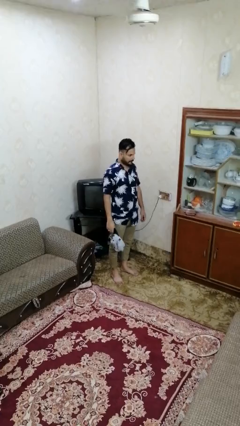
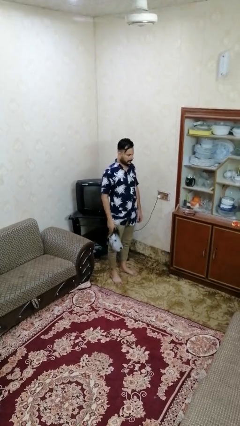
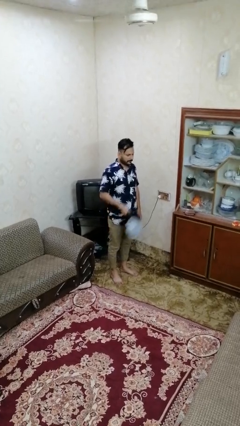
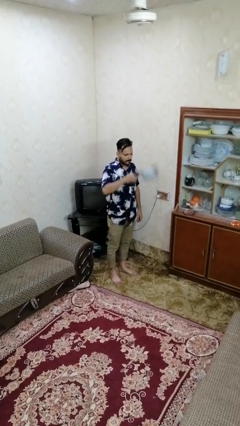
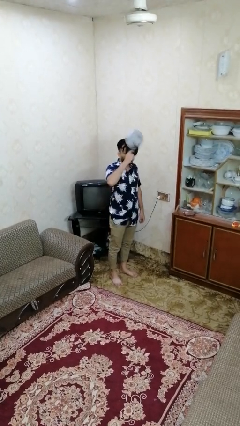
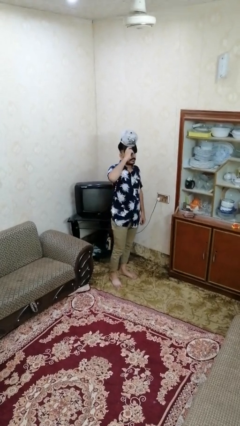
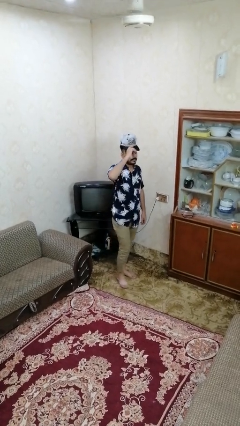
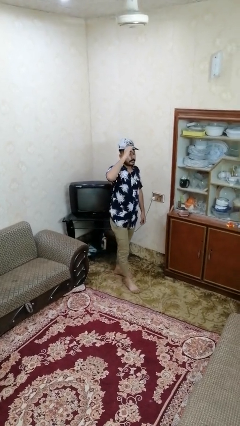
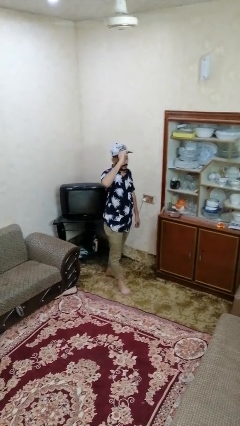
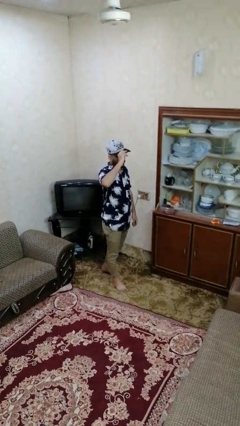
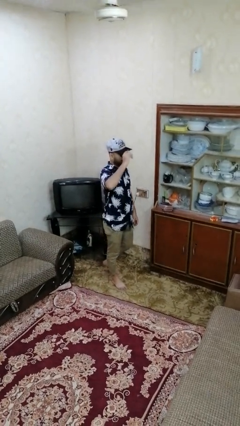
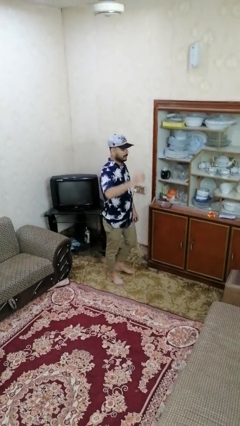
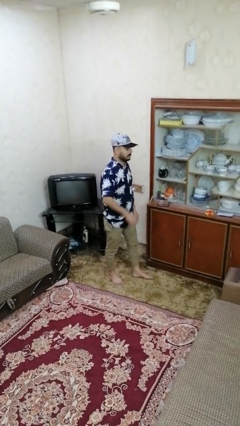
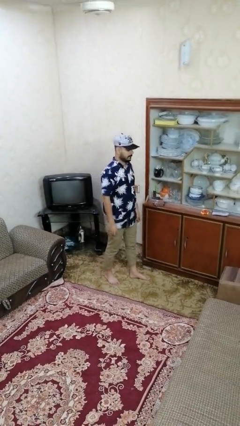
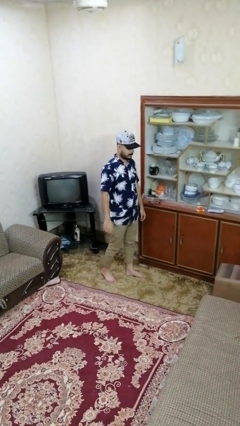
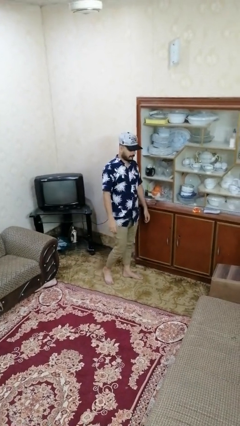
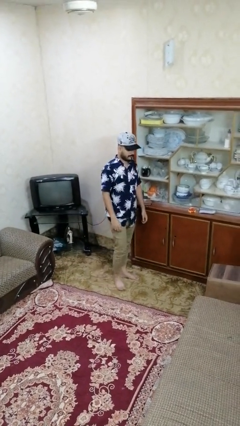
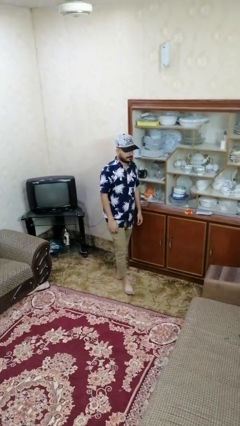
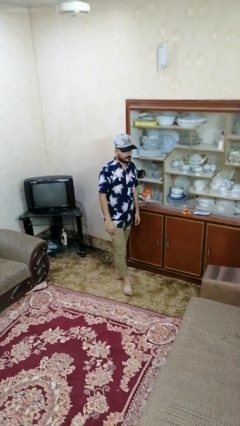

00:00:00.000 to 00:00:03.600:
person puts on hat

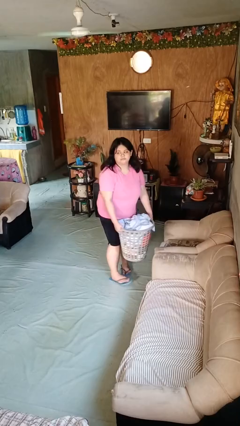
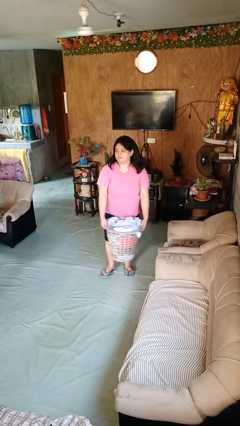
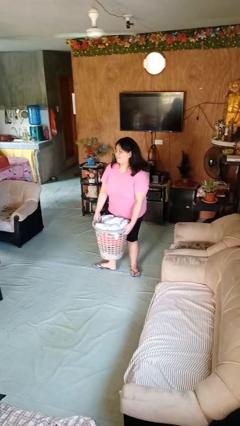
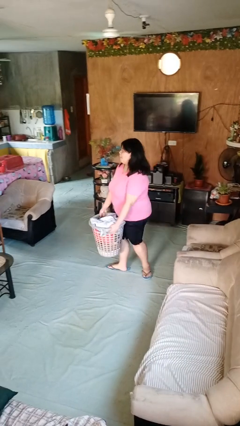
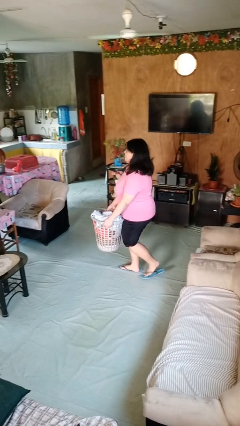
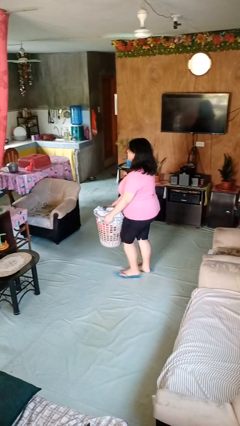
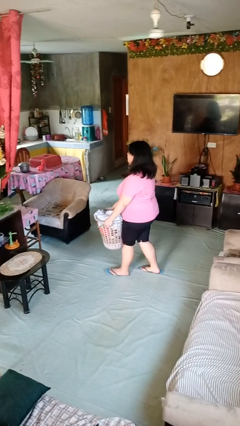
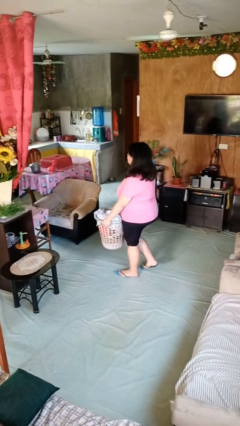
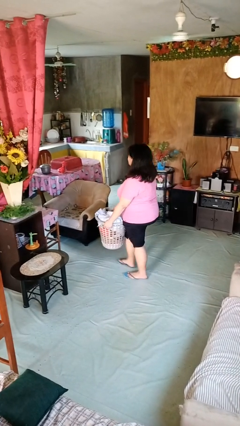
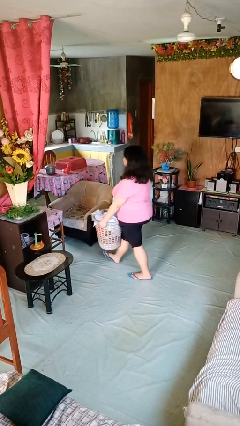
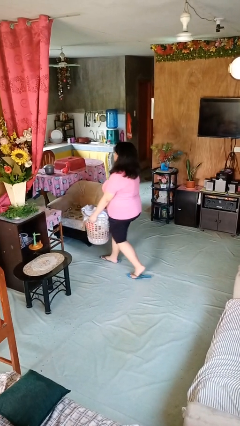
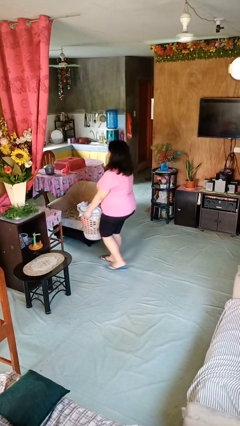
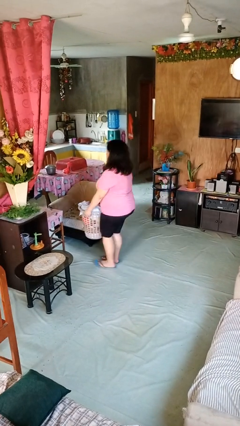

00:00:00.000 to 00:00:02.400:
person carries laundry basket

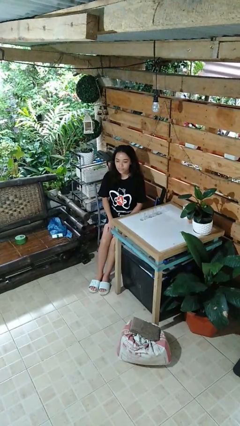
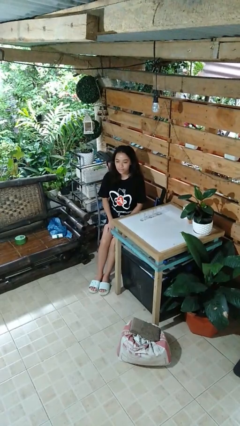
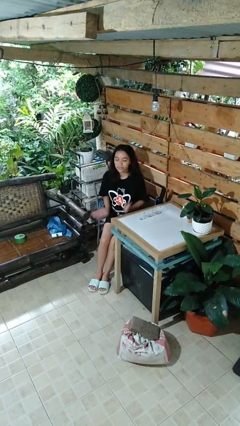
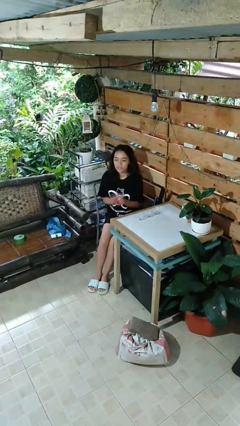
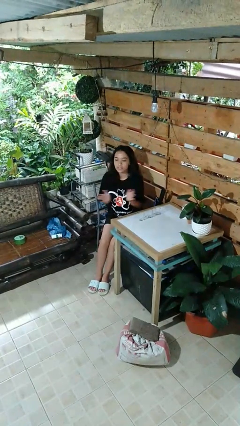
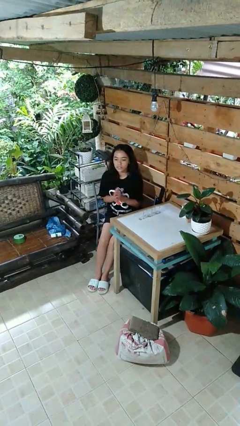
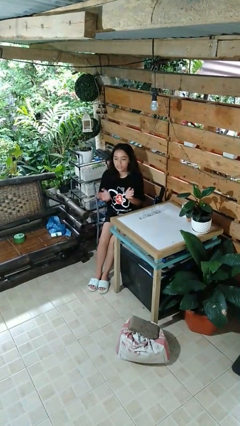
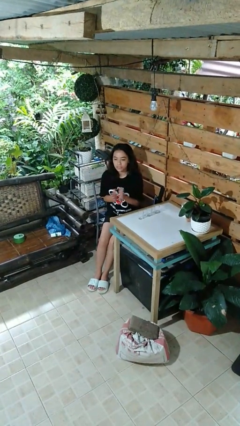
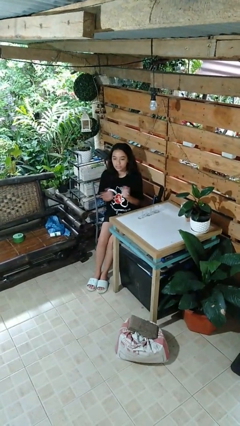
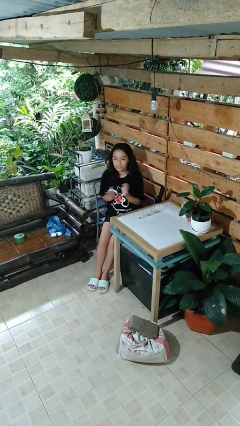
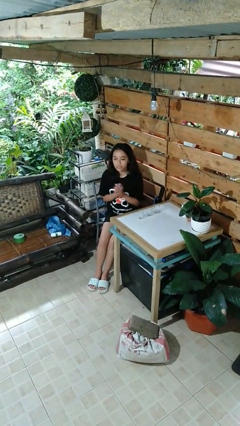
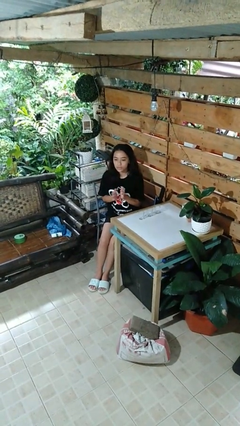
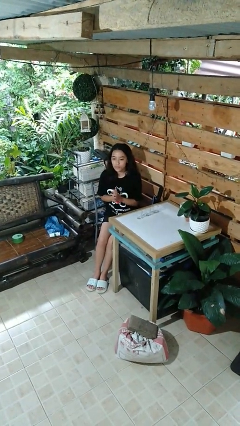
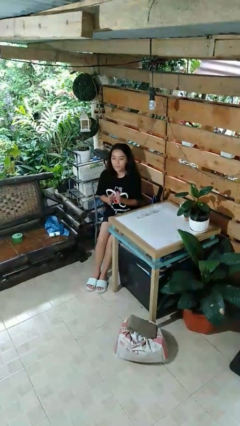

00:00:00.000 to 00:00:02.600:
person claps hands

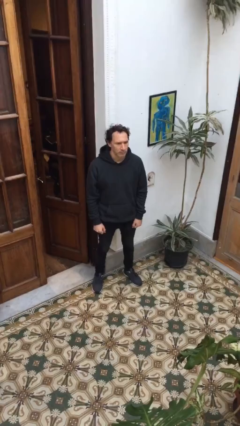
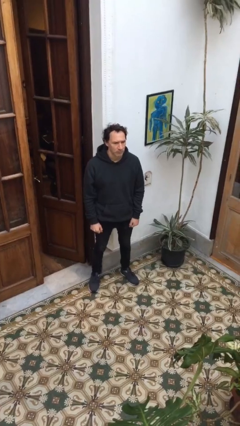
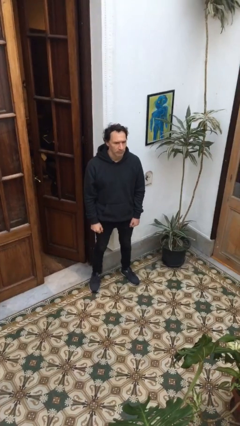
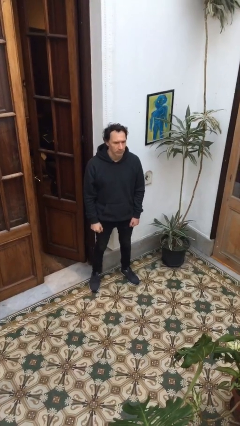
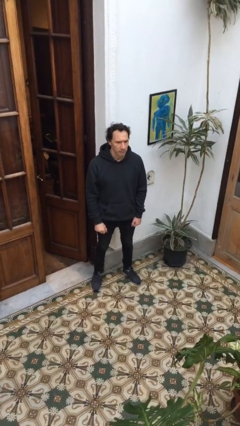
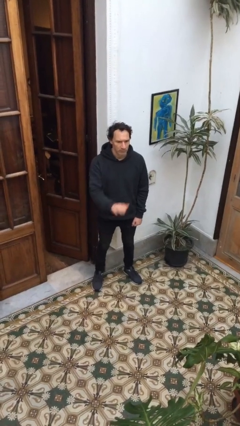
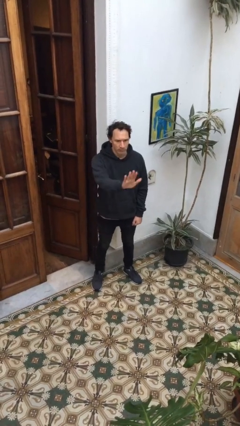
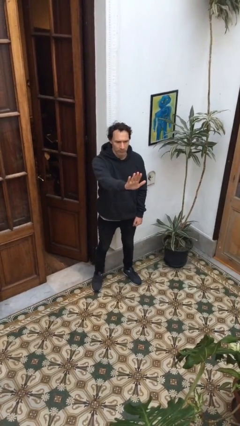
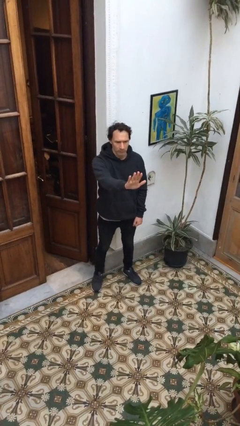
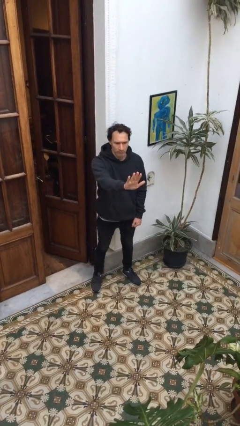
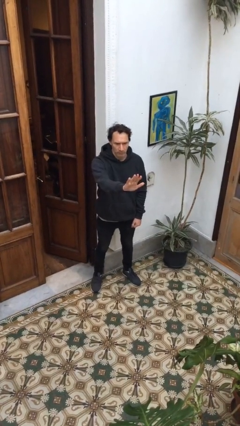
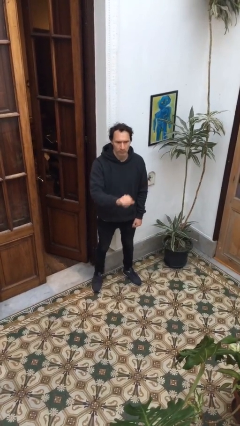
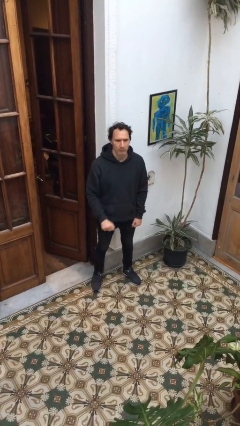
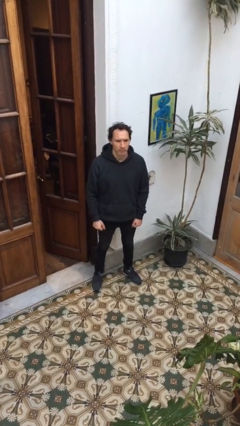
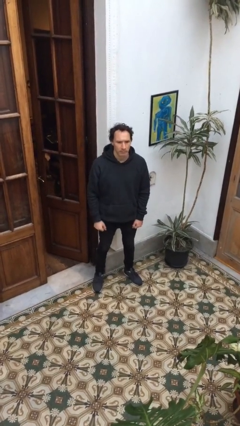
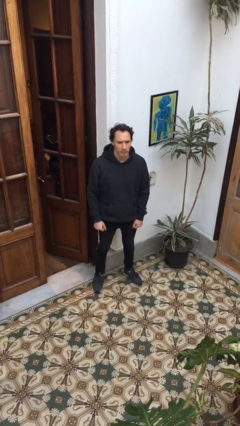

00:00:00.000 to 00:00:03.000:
person gestures stop

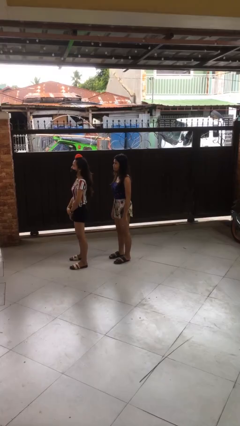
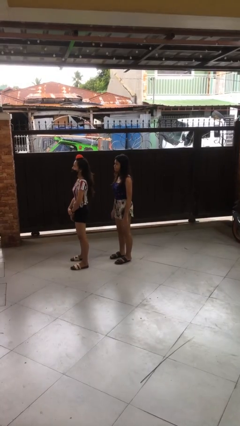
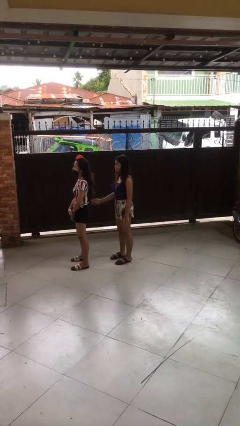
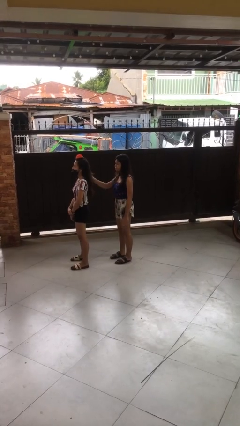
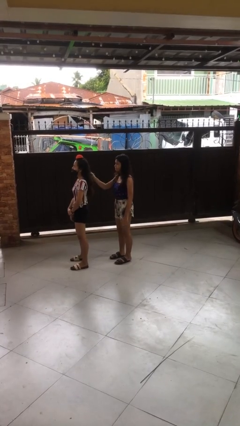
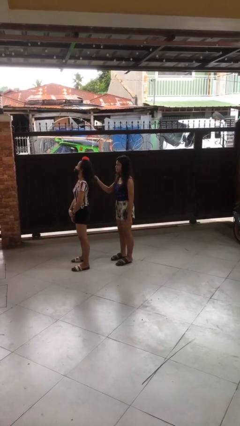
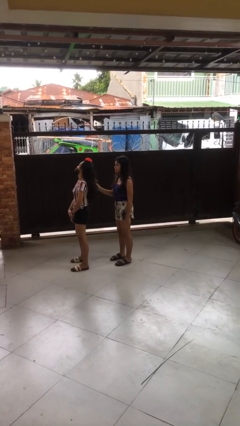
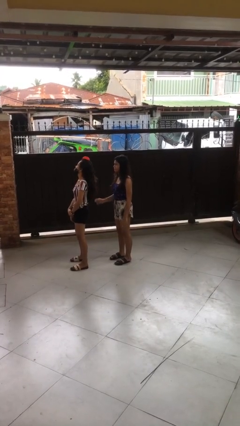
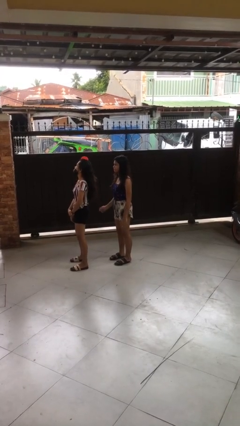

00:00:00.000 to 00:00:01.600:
person grabs person by hair

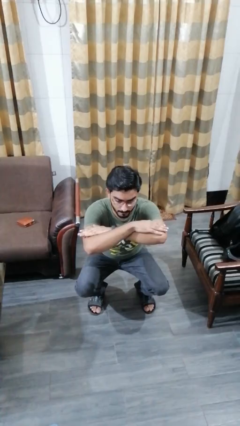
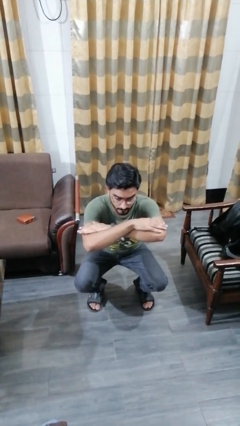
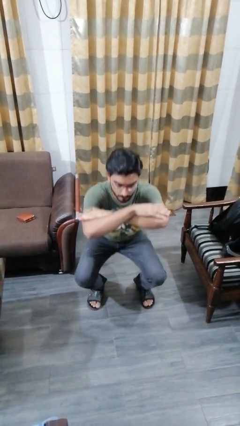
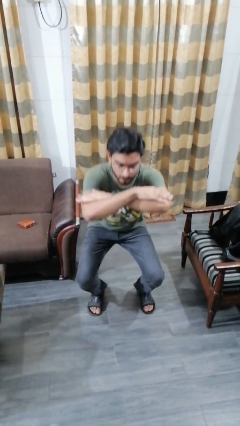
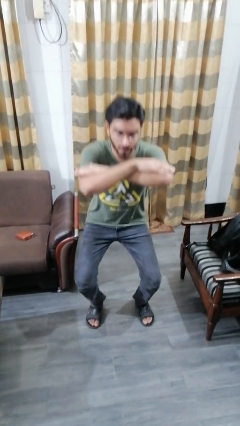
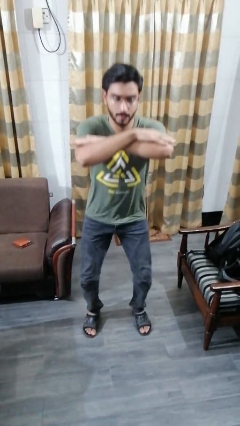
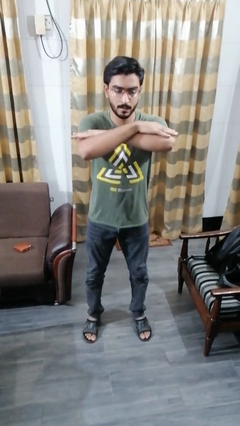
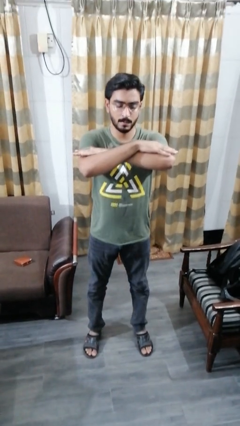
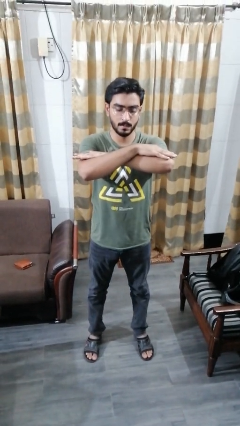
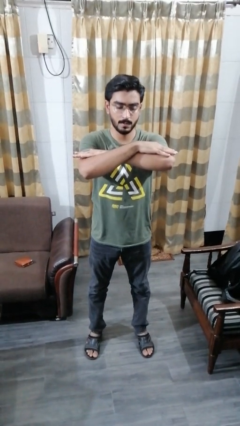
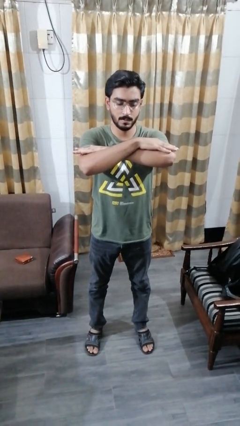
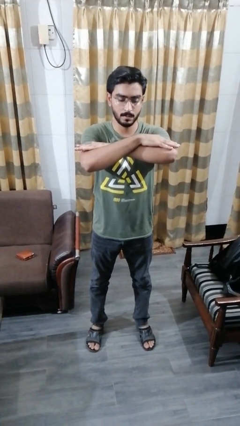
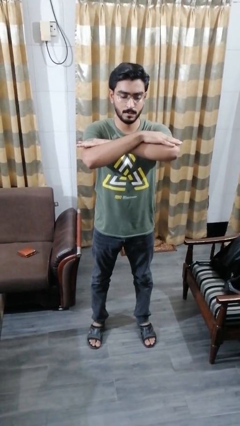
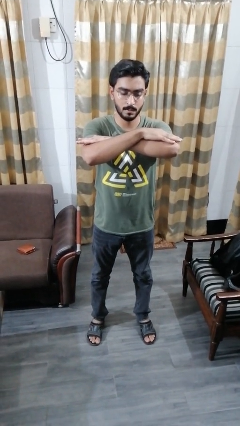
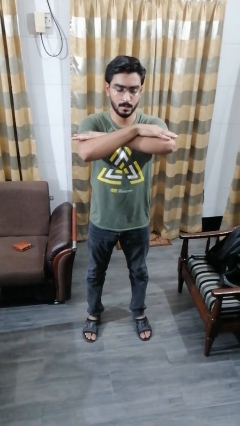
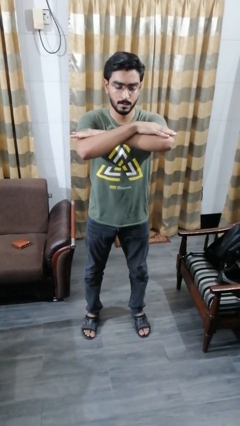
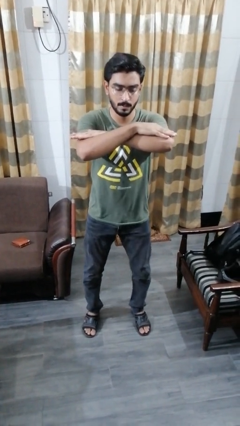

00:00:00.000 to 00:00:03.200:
person stands up

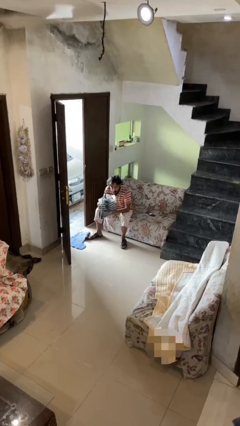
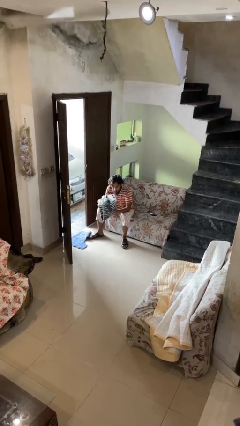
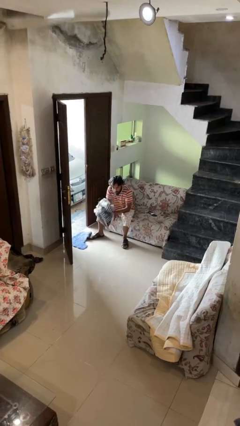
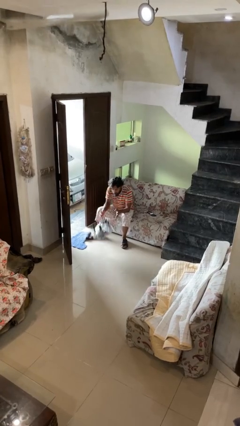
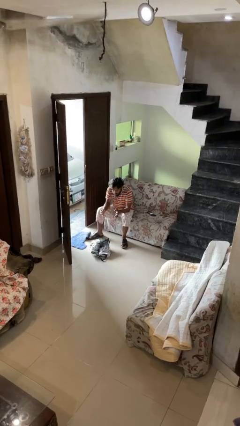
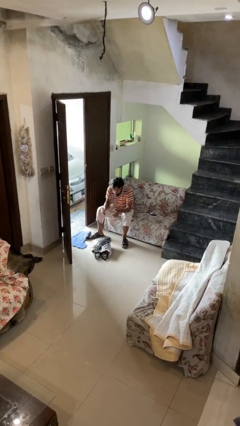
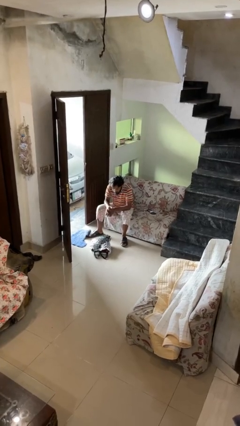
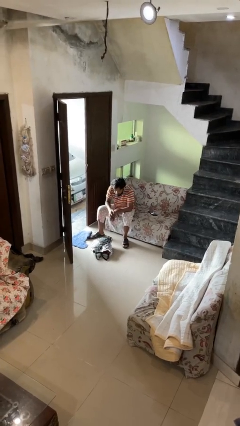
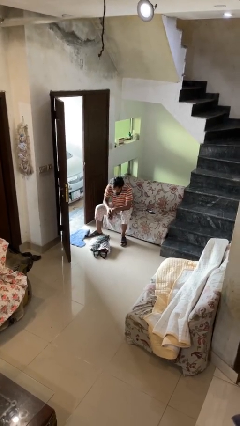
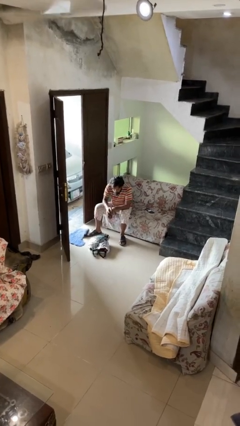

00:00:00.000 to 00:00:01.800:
person drops object
